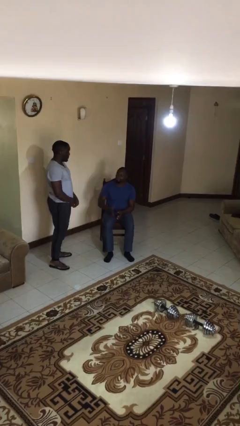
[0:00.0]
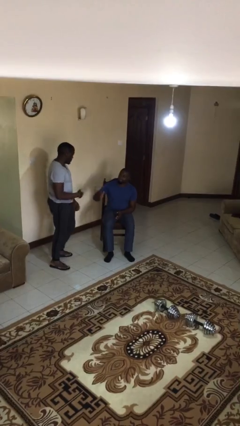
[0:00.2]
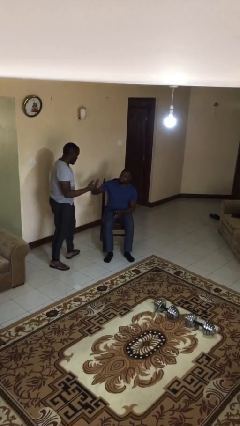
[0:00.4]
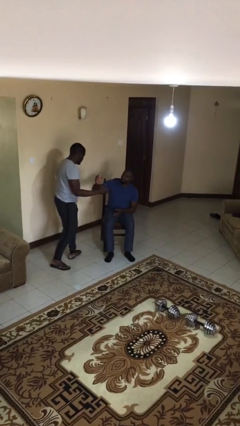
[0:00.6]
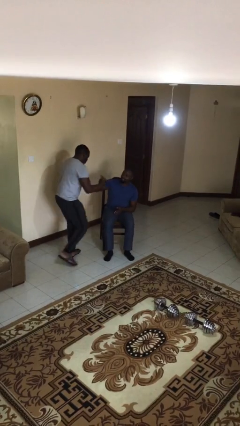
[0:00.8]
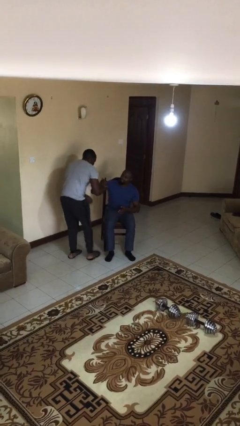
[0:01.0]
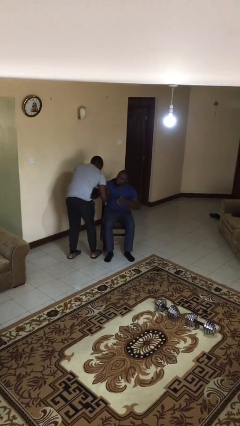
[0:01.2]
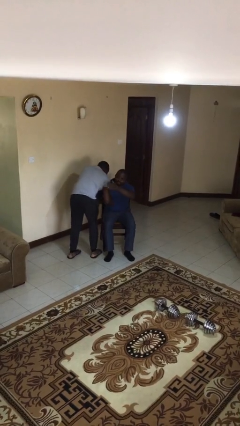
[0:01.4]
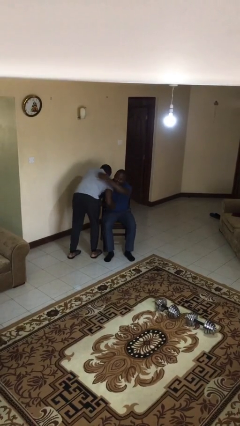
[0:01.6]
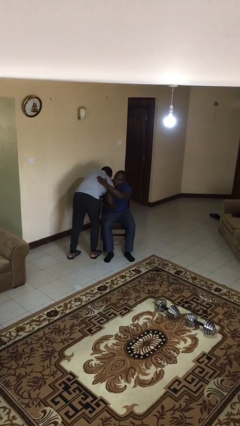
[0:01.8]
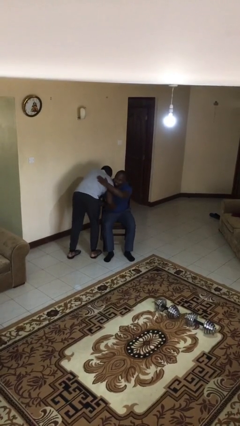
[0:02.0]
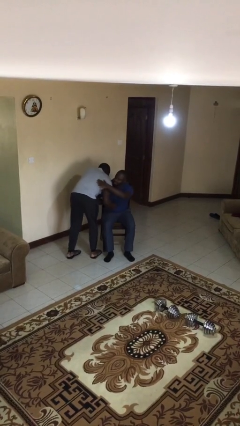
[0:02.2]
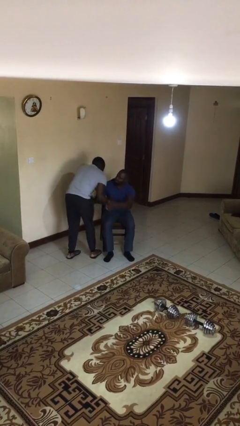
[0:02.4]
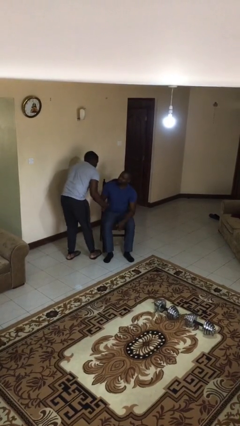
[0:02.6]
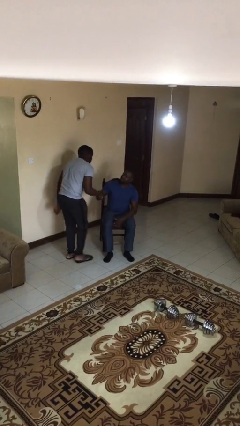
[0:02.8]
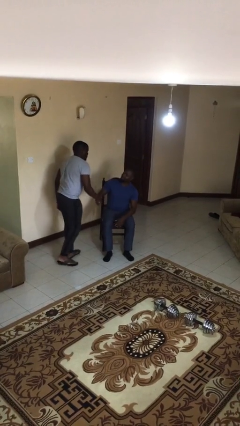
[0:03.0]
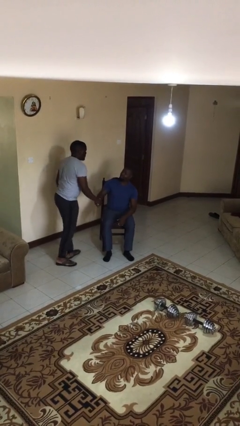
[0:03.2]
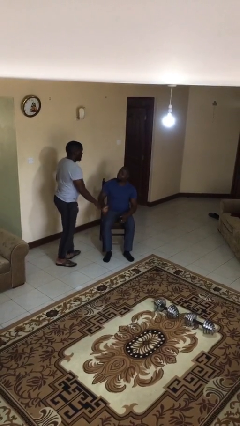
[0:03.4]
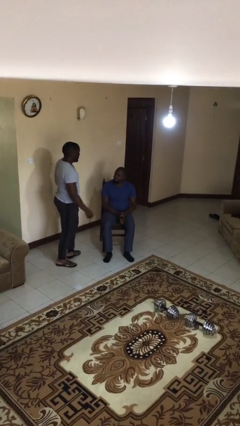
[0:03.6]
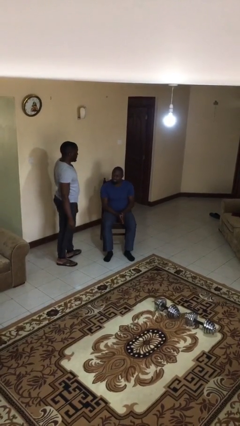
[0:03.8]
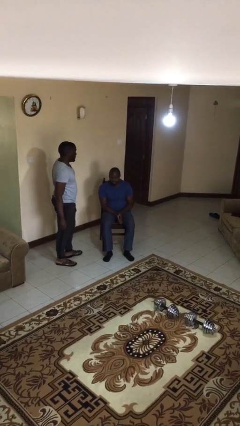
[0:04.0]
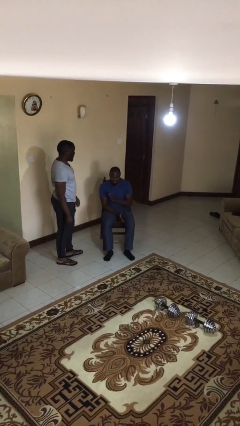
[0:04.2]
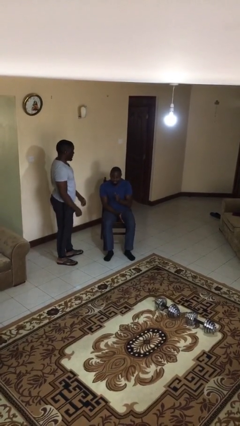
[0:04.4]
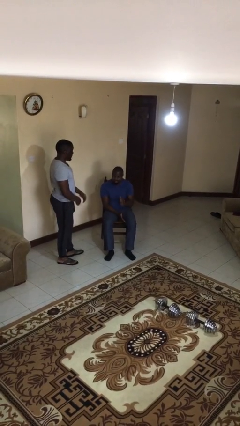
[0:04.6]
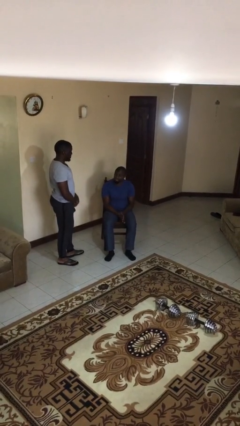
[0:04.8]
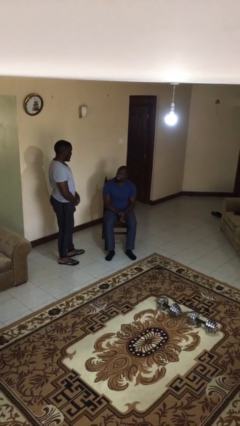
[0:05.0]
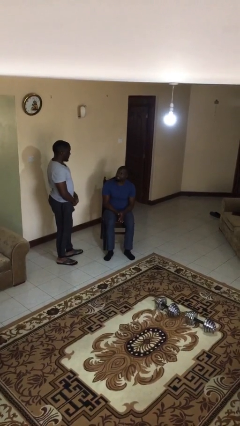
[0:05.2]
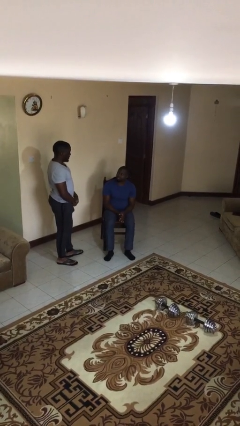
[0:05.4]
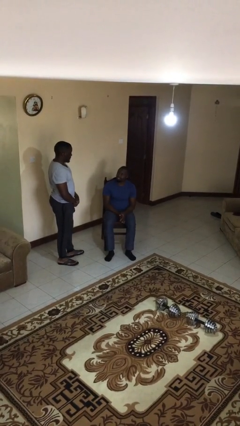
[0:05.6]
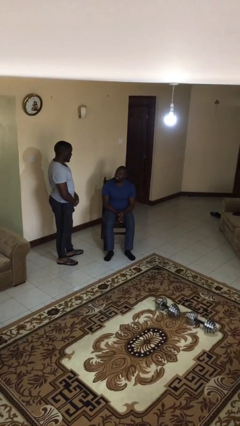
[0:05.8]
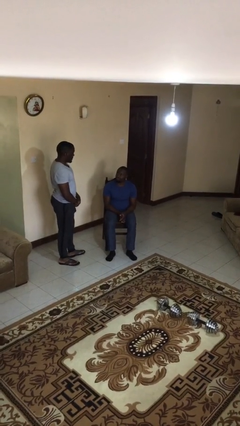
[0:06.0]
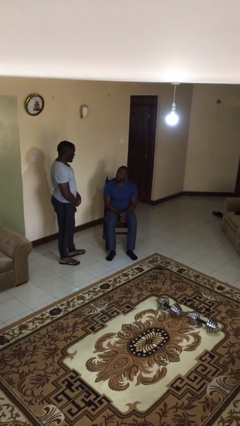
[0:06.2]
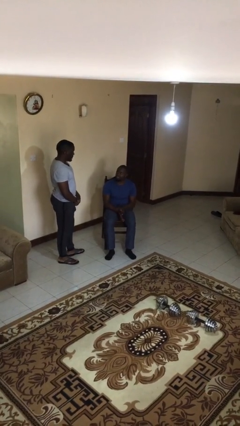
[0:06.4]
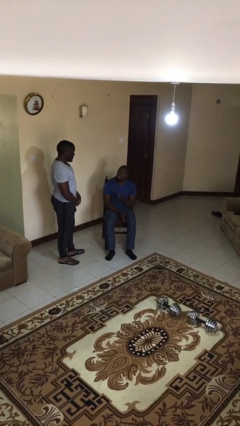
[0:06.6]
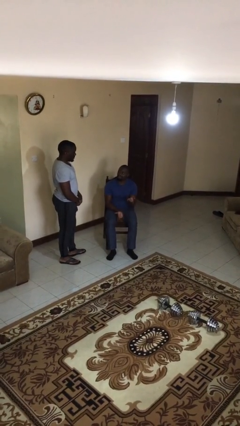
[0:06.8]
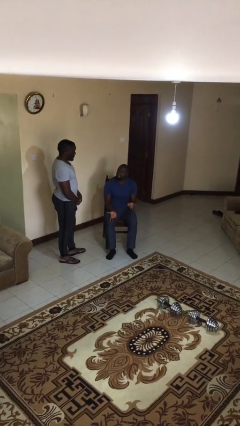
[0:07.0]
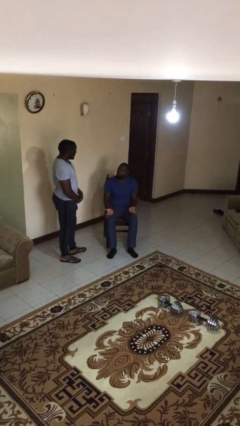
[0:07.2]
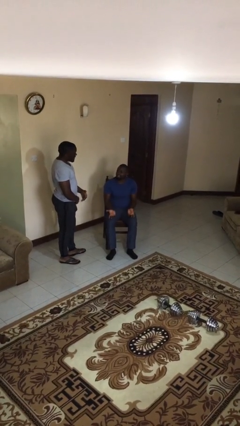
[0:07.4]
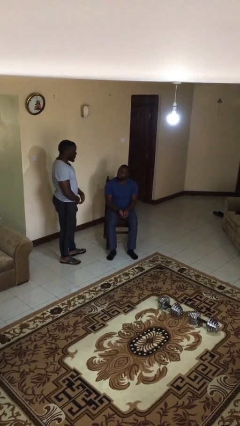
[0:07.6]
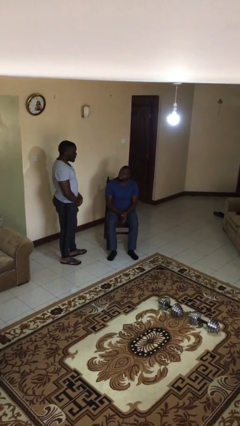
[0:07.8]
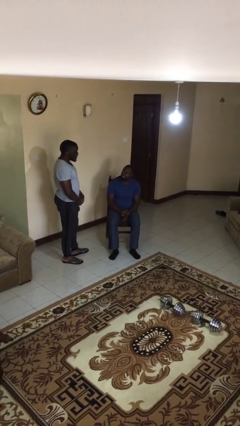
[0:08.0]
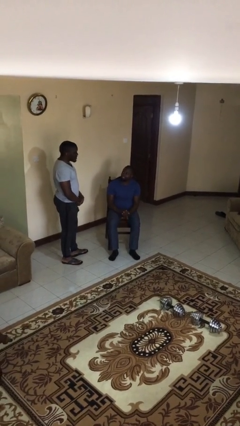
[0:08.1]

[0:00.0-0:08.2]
person embraces person

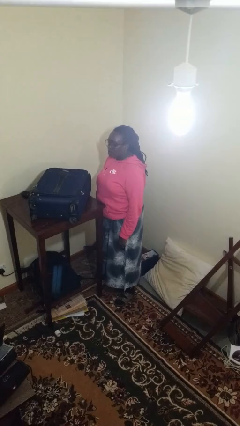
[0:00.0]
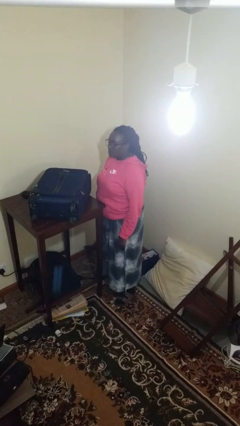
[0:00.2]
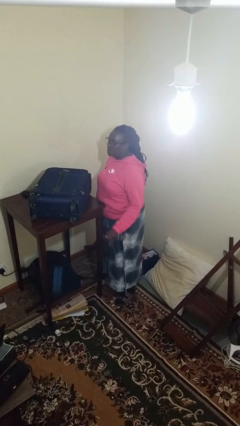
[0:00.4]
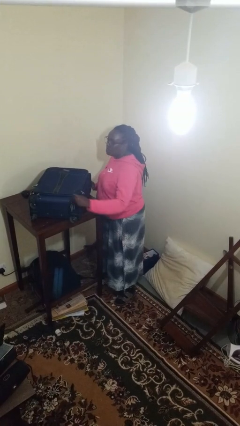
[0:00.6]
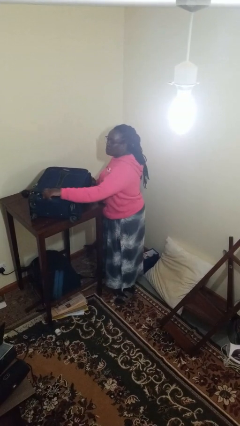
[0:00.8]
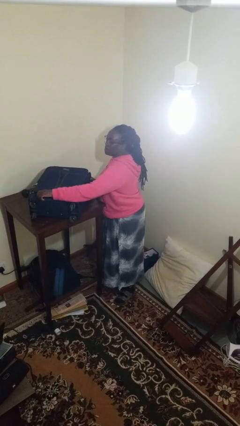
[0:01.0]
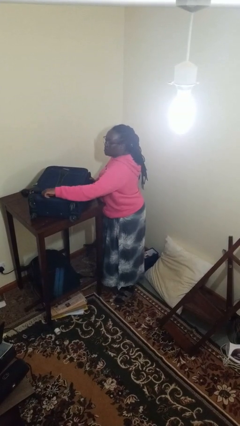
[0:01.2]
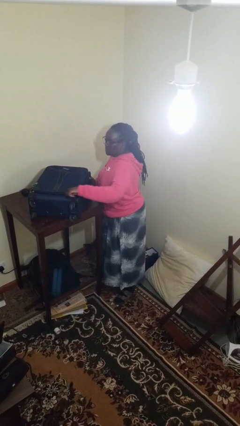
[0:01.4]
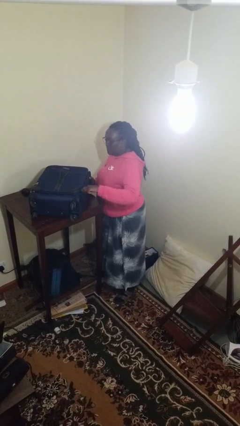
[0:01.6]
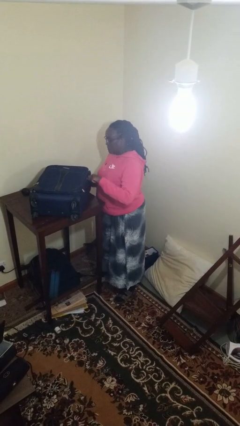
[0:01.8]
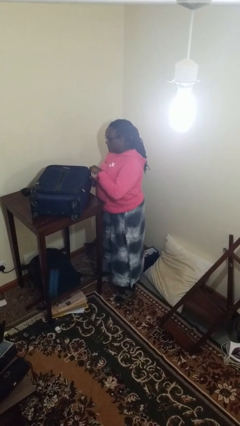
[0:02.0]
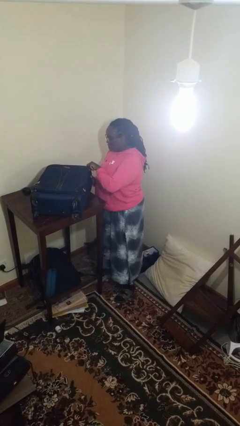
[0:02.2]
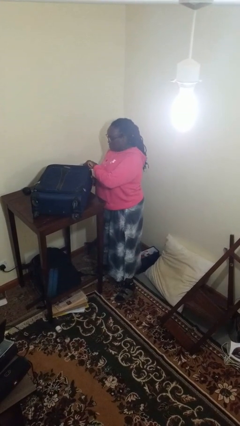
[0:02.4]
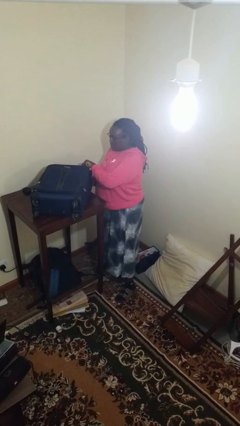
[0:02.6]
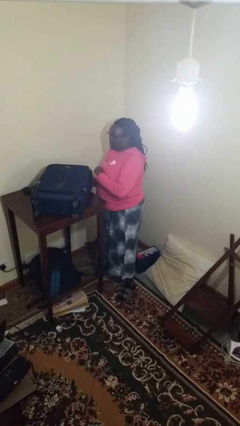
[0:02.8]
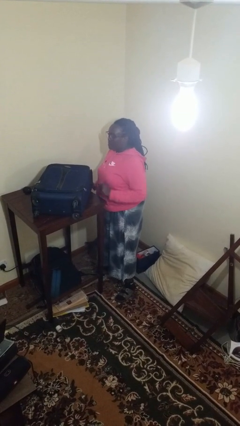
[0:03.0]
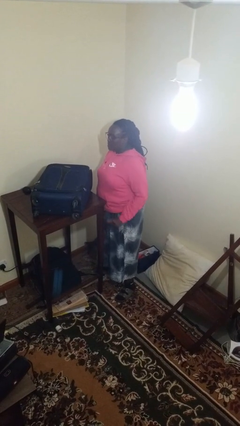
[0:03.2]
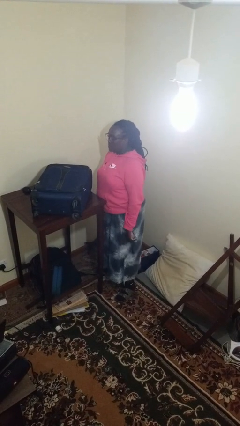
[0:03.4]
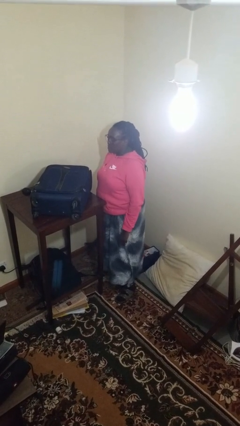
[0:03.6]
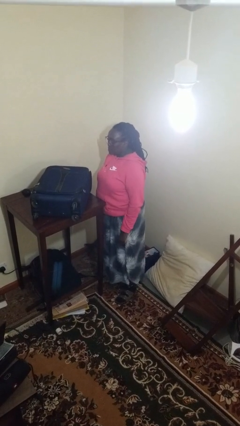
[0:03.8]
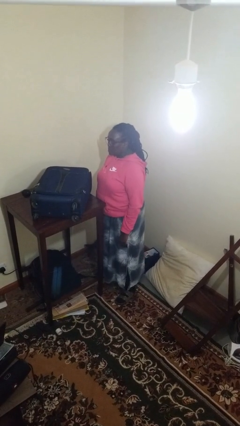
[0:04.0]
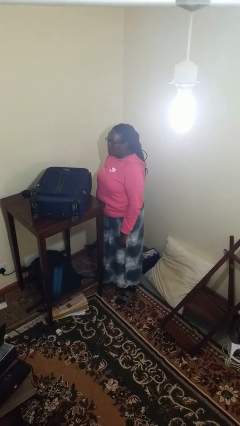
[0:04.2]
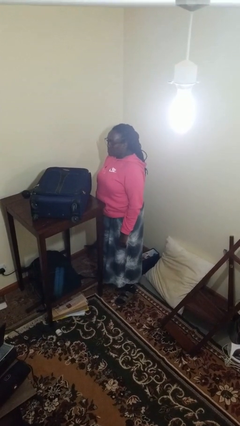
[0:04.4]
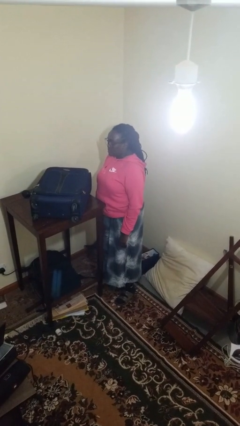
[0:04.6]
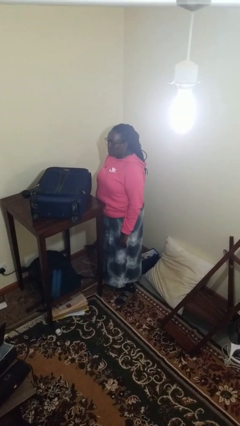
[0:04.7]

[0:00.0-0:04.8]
person opens suitcase

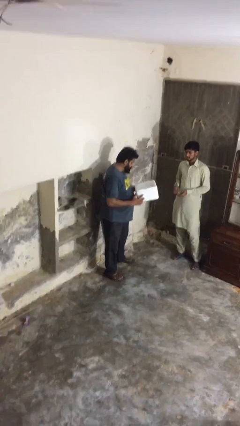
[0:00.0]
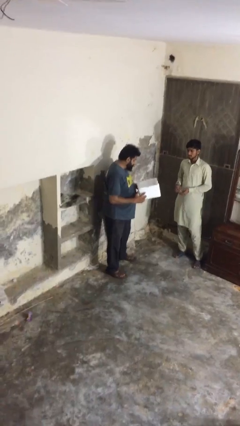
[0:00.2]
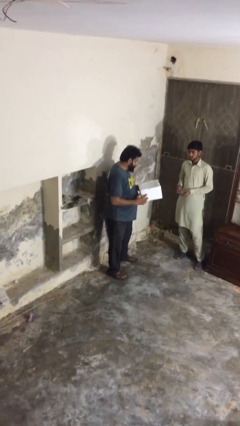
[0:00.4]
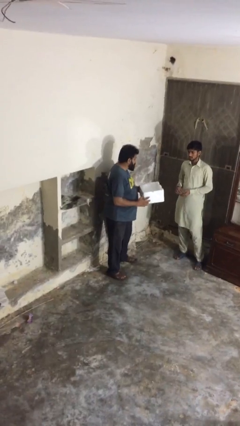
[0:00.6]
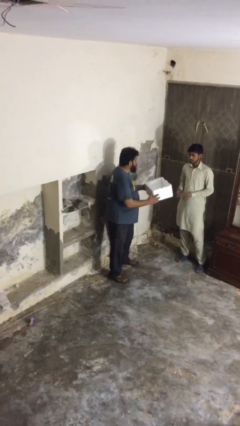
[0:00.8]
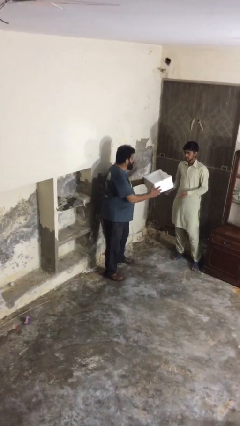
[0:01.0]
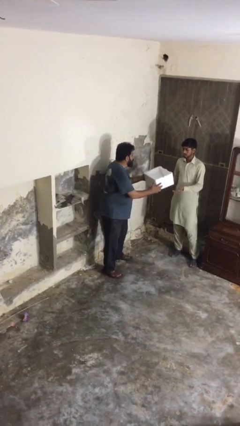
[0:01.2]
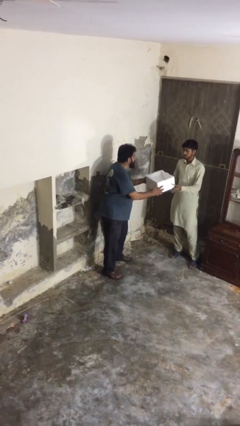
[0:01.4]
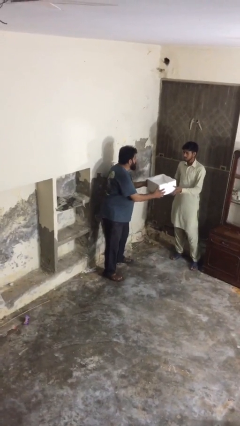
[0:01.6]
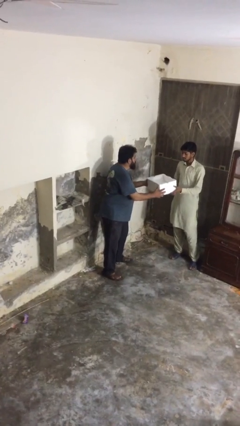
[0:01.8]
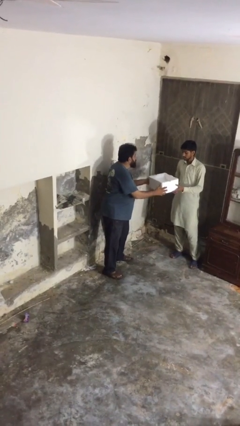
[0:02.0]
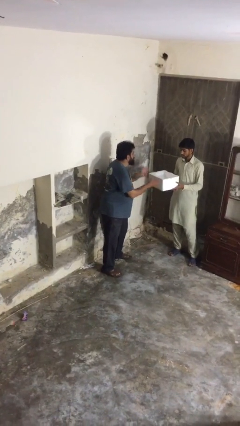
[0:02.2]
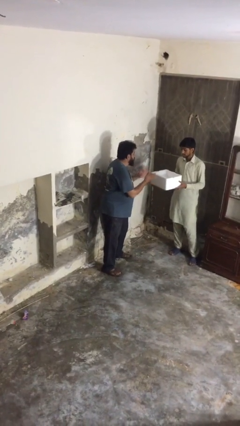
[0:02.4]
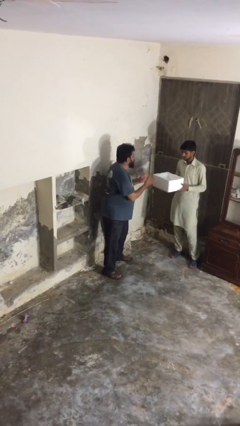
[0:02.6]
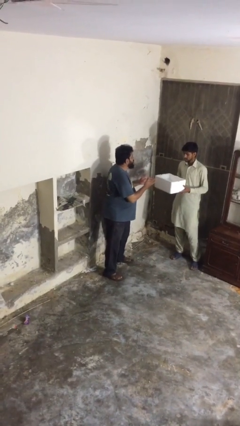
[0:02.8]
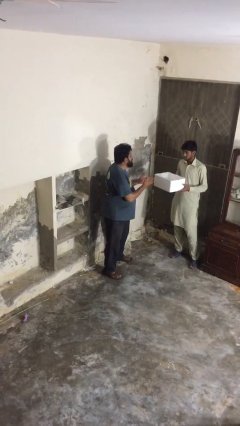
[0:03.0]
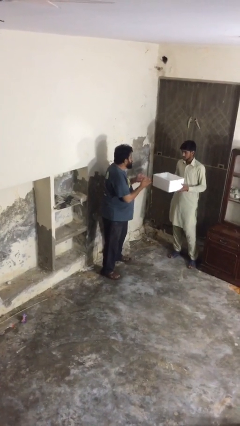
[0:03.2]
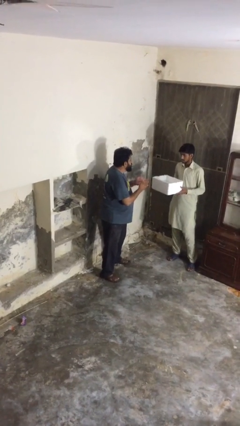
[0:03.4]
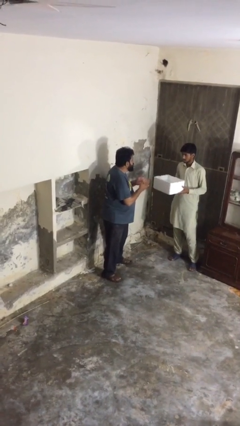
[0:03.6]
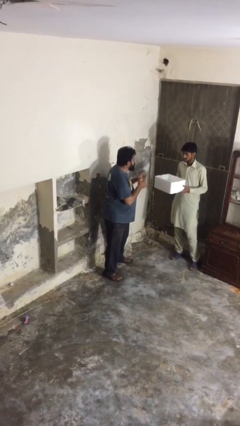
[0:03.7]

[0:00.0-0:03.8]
person transfers object to person

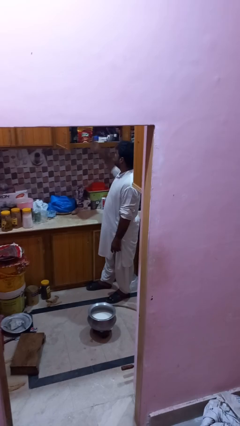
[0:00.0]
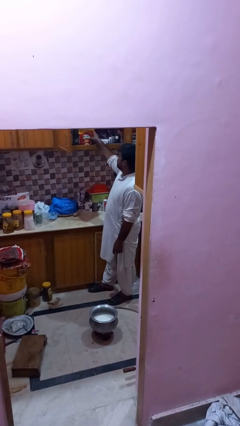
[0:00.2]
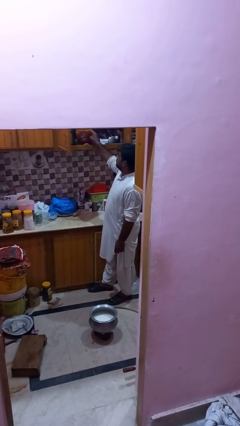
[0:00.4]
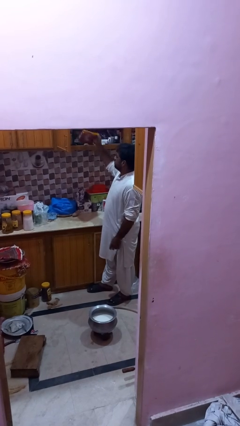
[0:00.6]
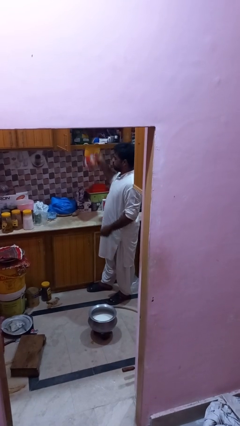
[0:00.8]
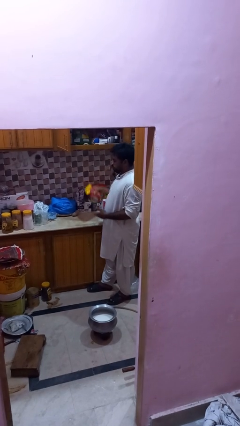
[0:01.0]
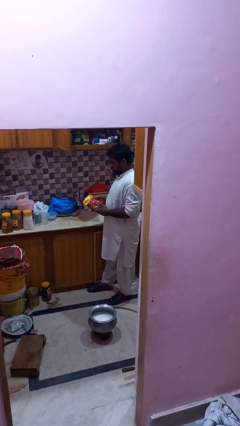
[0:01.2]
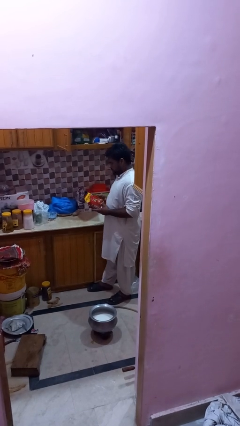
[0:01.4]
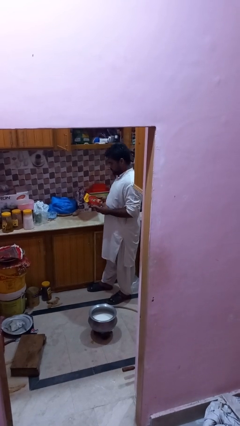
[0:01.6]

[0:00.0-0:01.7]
person picks up object from cabinet
